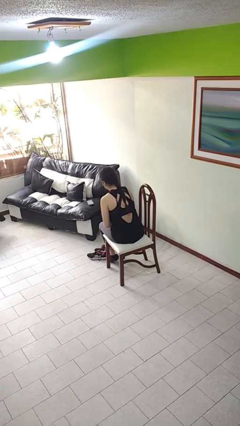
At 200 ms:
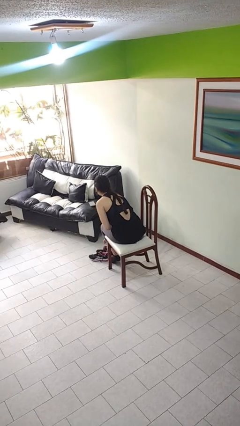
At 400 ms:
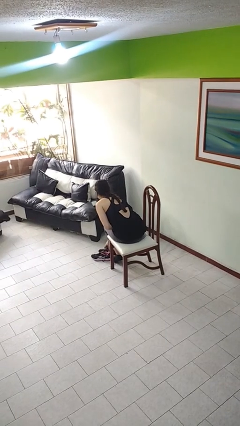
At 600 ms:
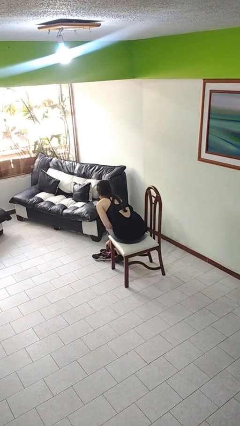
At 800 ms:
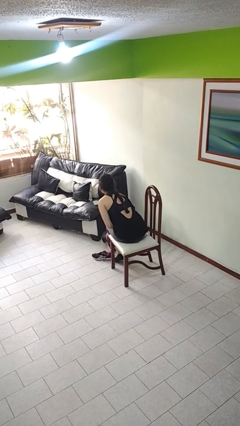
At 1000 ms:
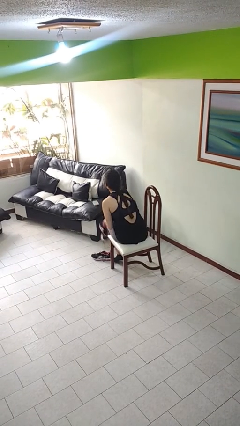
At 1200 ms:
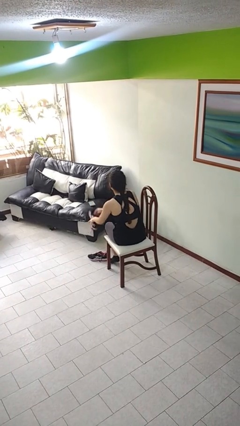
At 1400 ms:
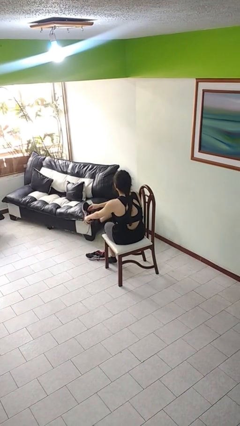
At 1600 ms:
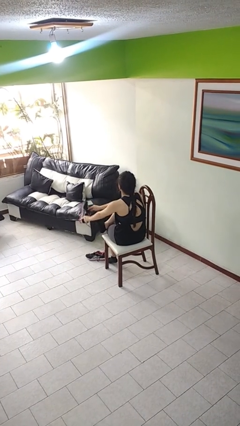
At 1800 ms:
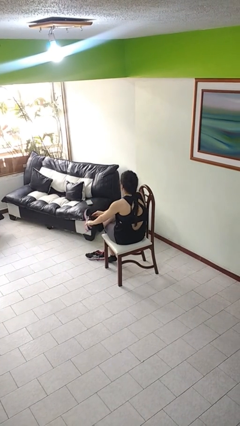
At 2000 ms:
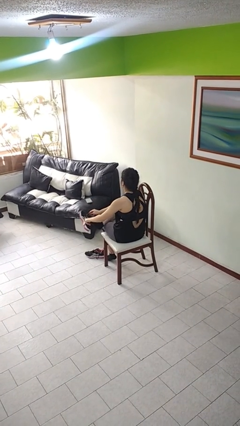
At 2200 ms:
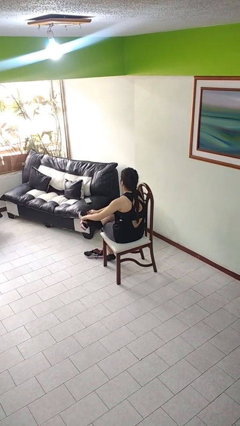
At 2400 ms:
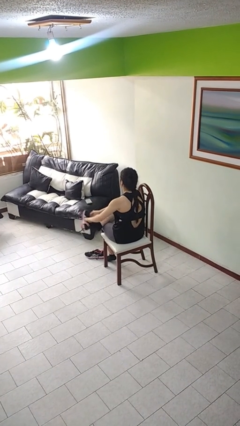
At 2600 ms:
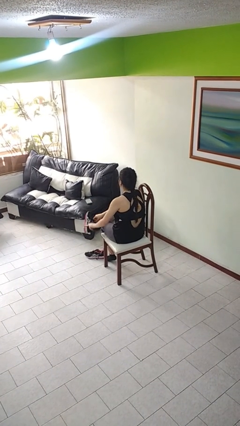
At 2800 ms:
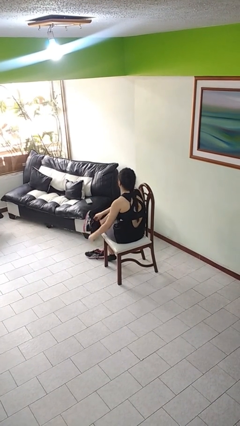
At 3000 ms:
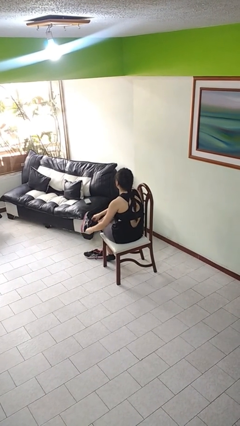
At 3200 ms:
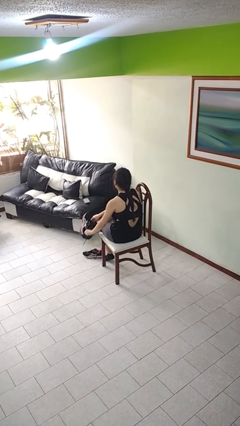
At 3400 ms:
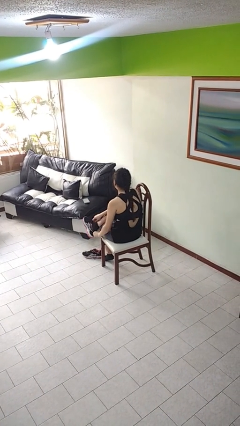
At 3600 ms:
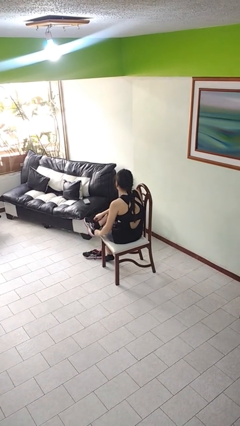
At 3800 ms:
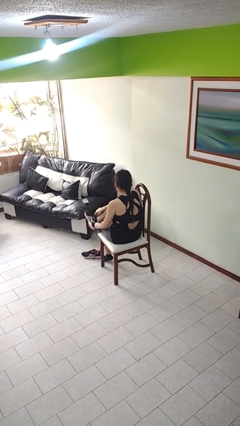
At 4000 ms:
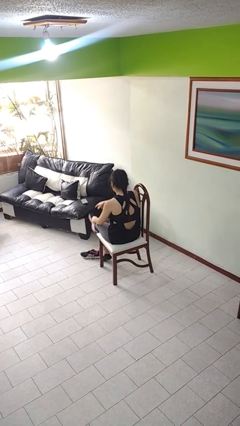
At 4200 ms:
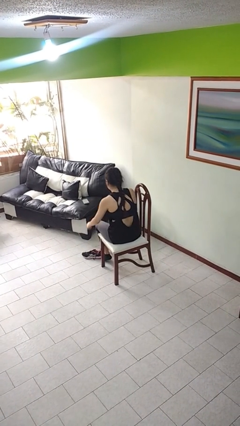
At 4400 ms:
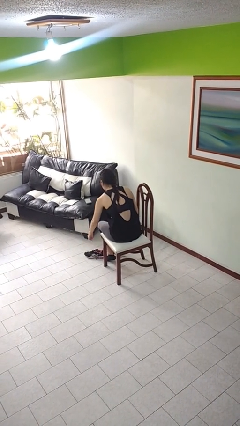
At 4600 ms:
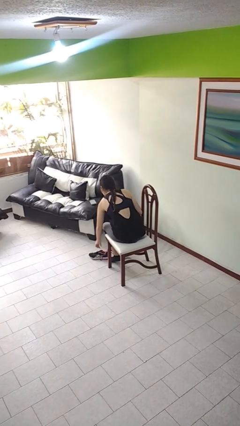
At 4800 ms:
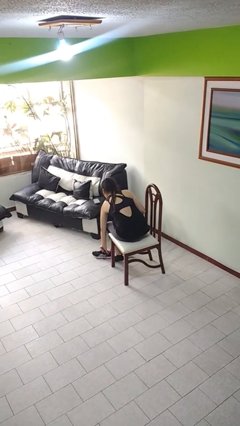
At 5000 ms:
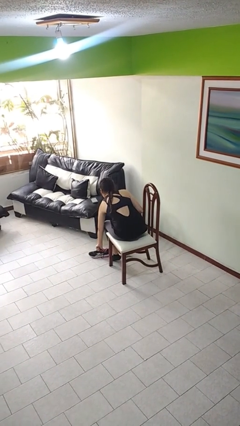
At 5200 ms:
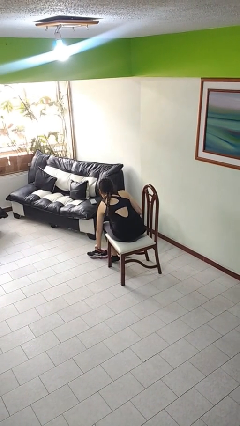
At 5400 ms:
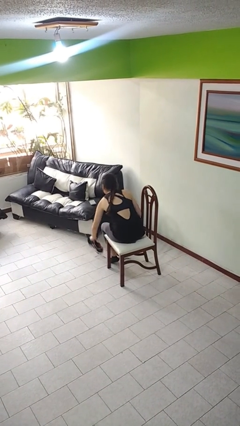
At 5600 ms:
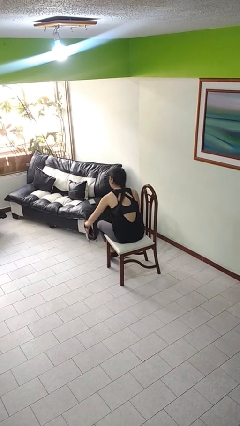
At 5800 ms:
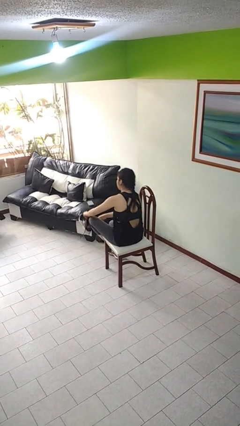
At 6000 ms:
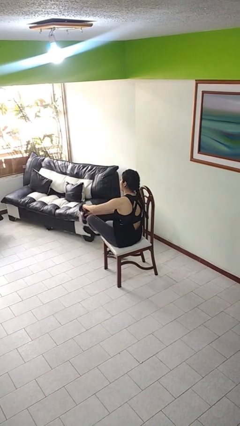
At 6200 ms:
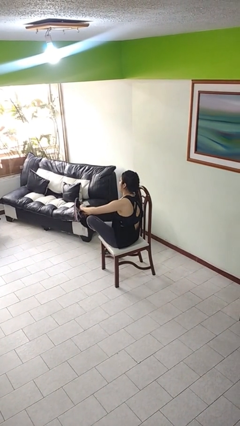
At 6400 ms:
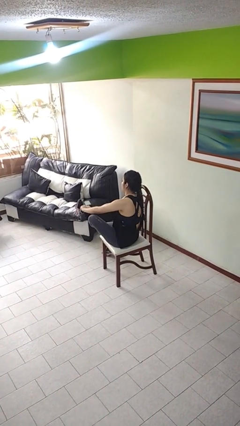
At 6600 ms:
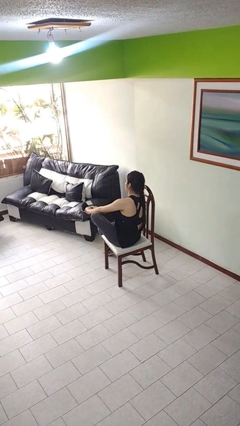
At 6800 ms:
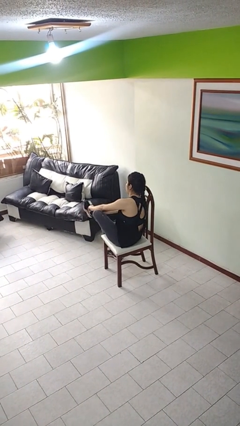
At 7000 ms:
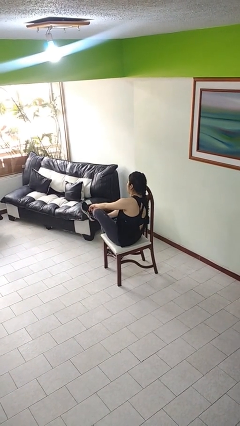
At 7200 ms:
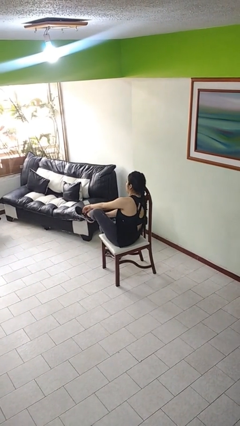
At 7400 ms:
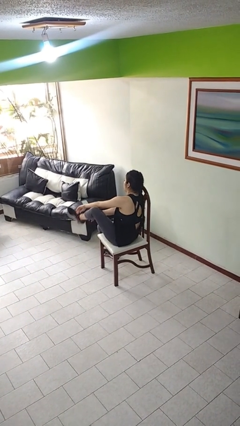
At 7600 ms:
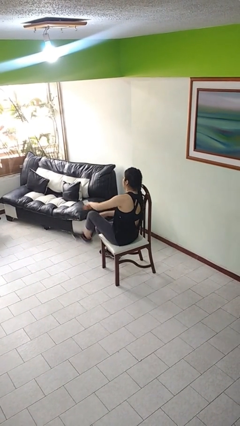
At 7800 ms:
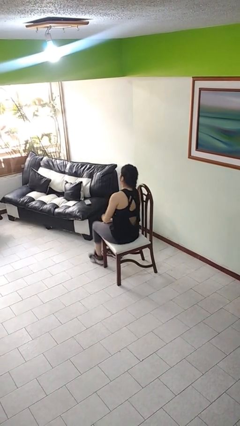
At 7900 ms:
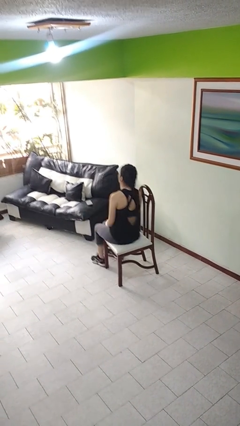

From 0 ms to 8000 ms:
person puts on shoes

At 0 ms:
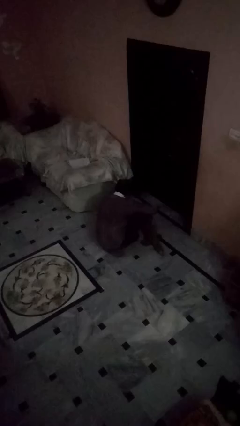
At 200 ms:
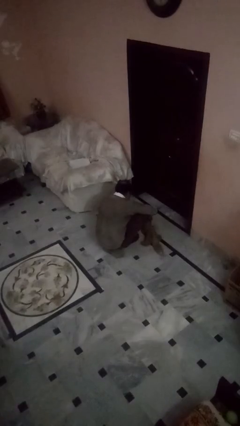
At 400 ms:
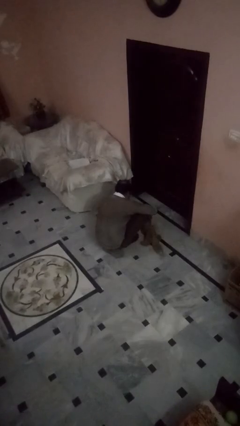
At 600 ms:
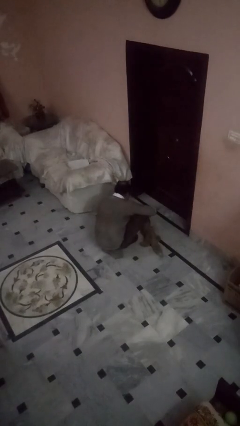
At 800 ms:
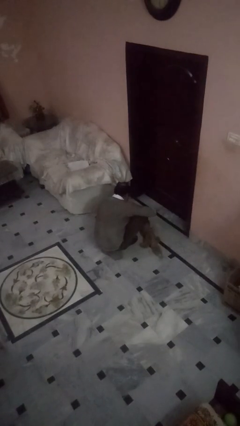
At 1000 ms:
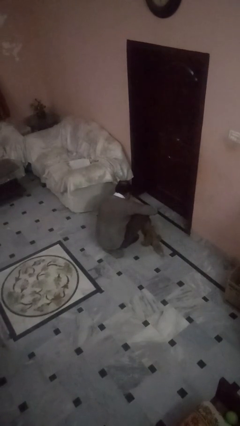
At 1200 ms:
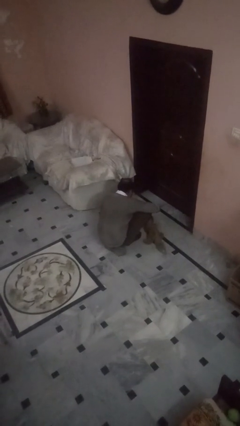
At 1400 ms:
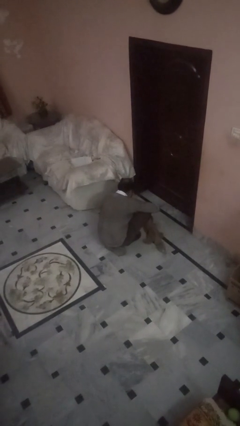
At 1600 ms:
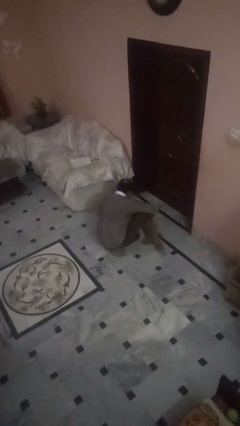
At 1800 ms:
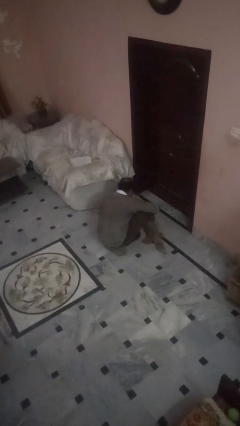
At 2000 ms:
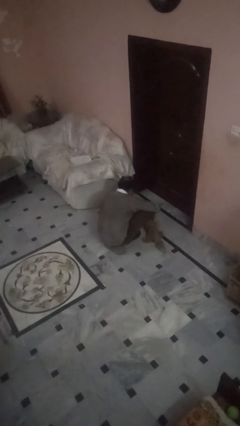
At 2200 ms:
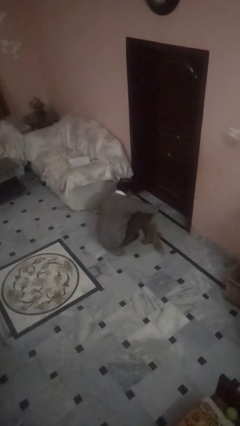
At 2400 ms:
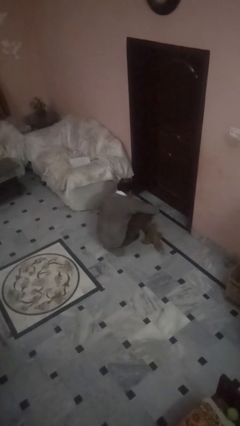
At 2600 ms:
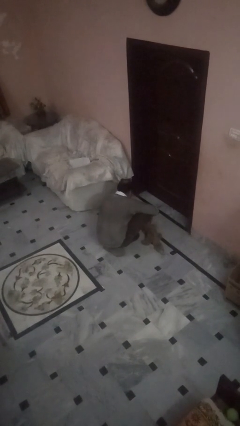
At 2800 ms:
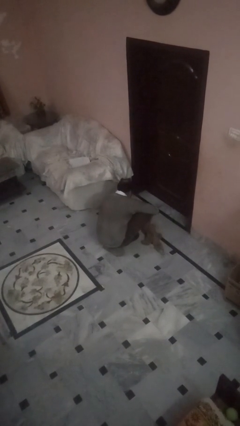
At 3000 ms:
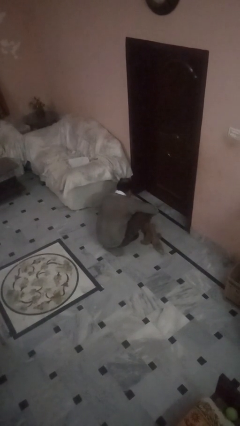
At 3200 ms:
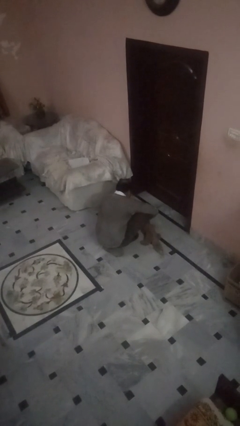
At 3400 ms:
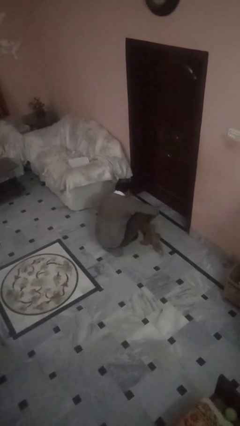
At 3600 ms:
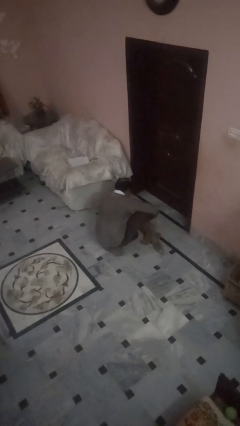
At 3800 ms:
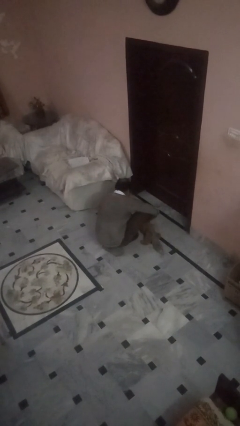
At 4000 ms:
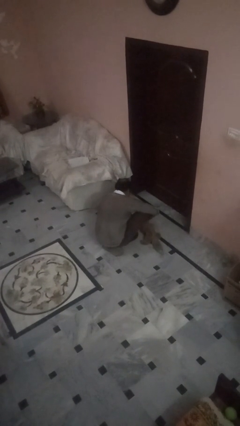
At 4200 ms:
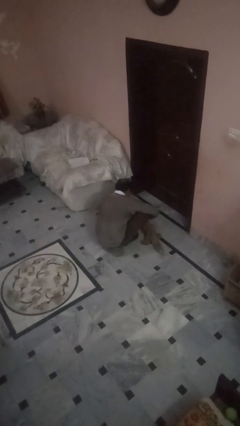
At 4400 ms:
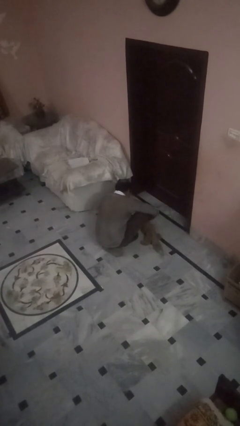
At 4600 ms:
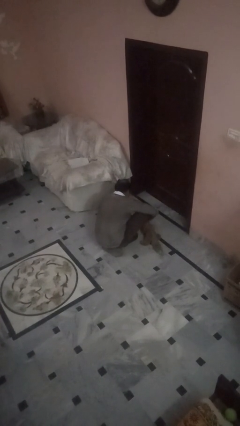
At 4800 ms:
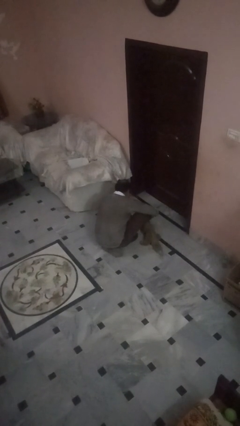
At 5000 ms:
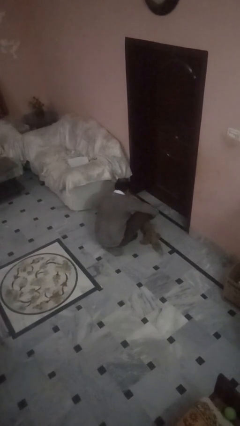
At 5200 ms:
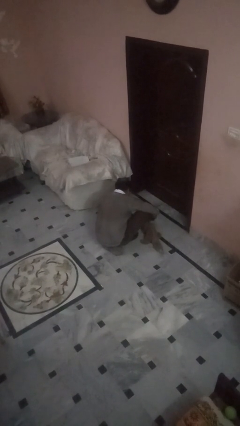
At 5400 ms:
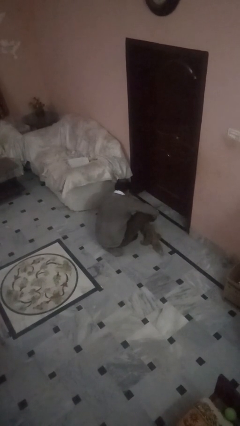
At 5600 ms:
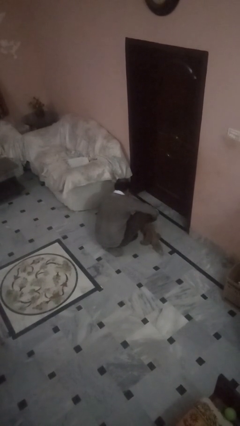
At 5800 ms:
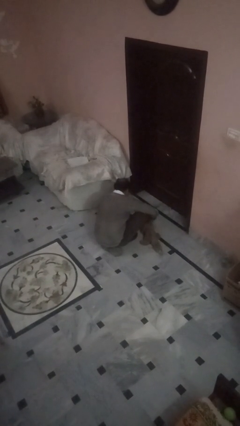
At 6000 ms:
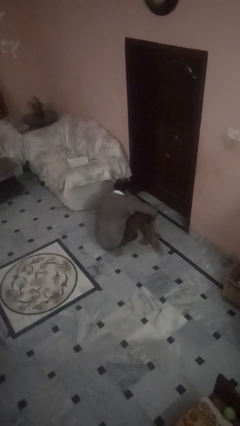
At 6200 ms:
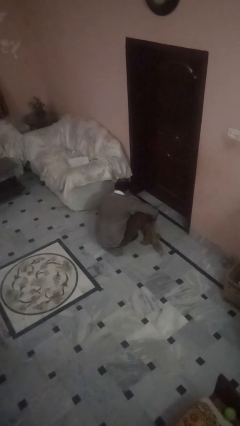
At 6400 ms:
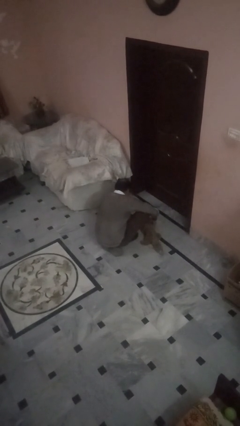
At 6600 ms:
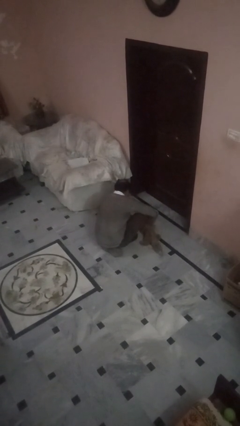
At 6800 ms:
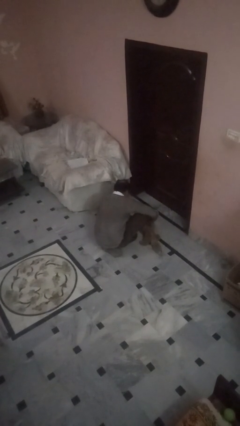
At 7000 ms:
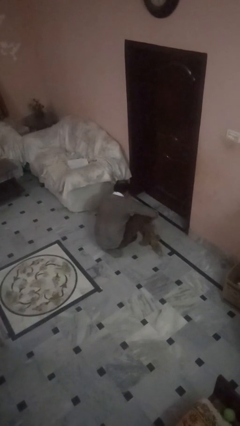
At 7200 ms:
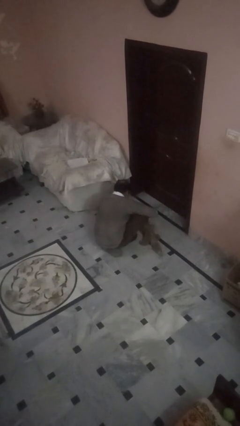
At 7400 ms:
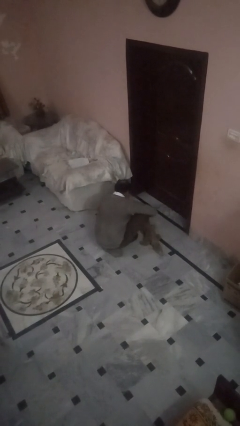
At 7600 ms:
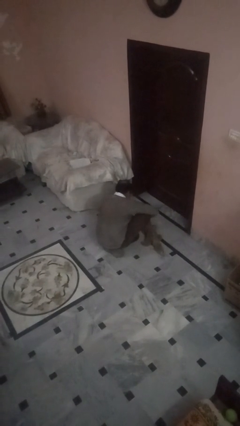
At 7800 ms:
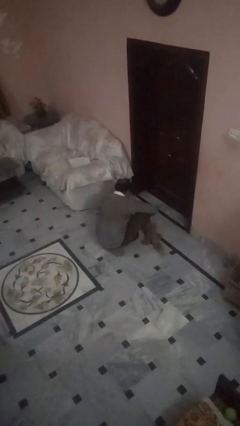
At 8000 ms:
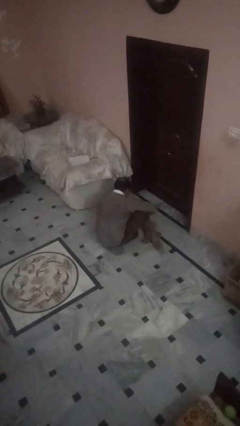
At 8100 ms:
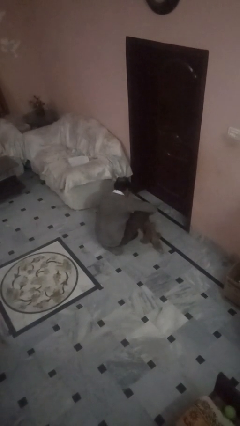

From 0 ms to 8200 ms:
person attaches leash to dog

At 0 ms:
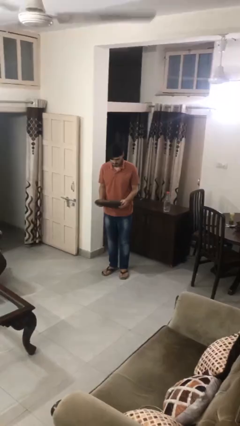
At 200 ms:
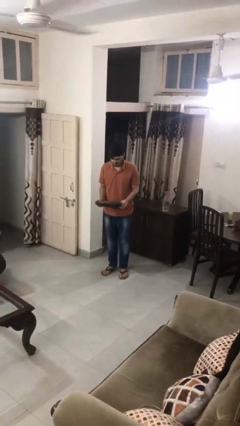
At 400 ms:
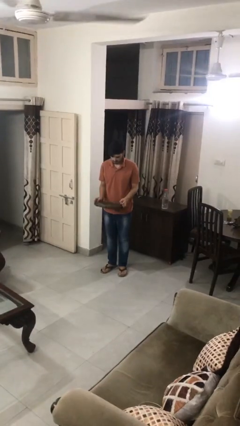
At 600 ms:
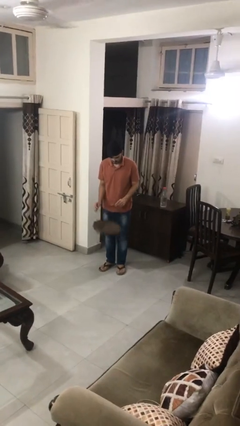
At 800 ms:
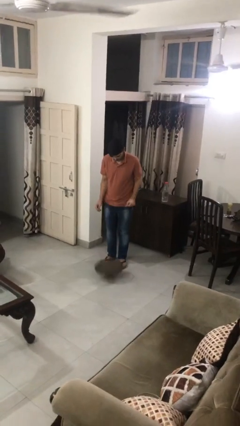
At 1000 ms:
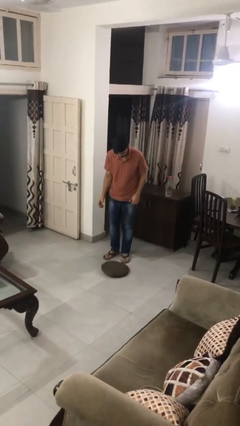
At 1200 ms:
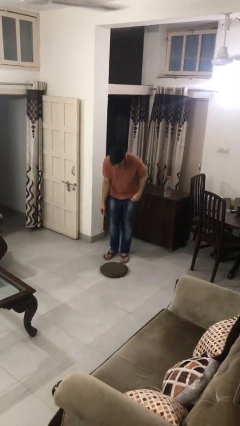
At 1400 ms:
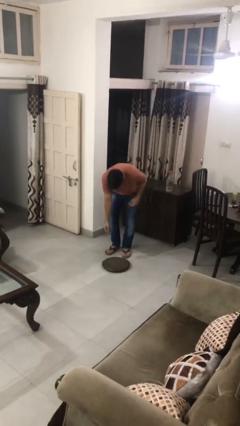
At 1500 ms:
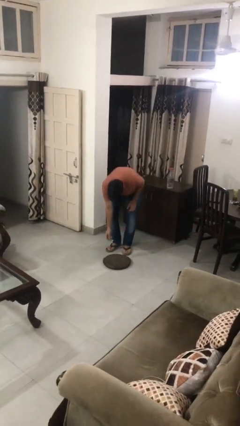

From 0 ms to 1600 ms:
person drops object

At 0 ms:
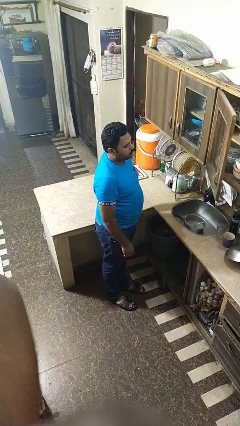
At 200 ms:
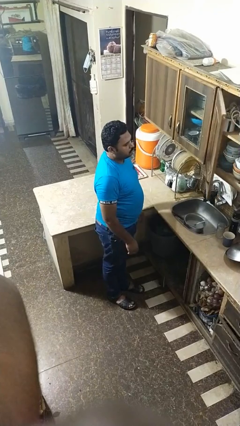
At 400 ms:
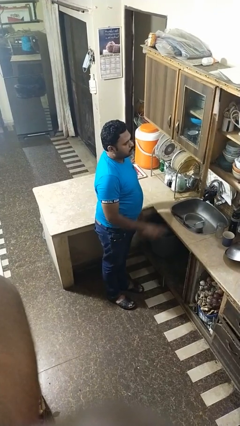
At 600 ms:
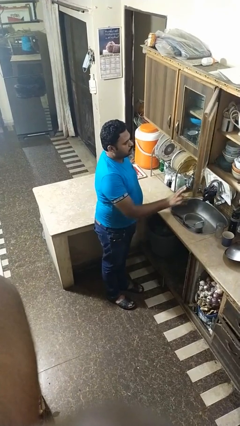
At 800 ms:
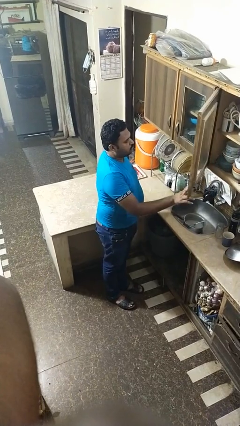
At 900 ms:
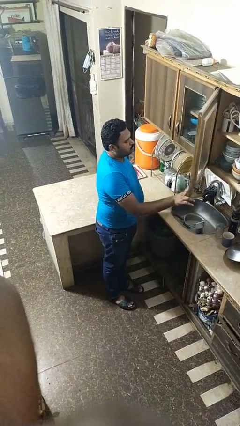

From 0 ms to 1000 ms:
person opens cabinet
